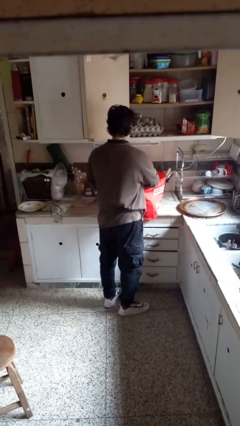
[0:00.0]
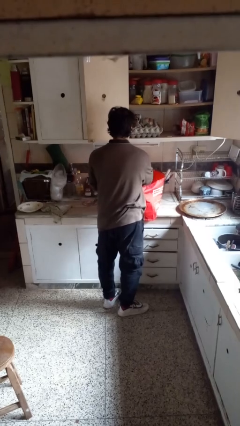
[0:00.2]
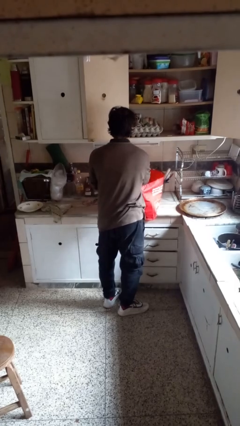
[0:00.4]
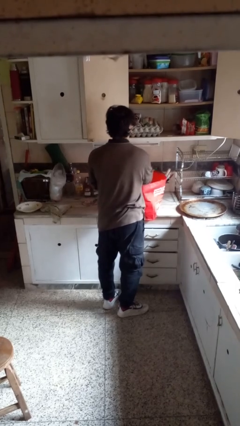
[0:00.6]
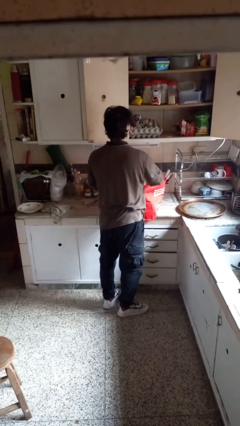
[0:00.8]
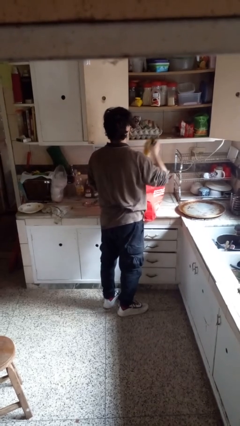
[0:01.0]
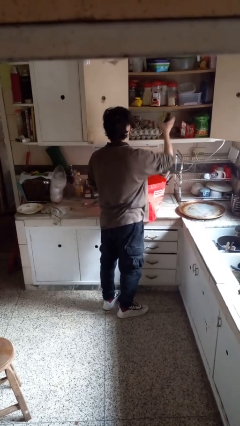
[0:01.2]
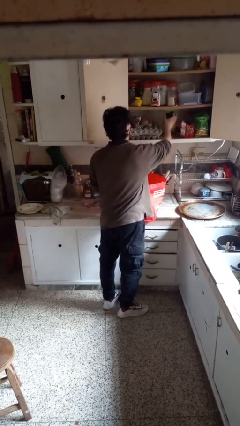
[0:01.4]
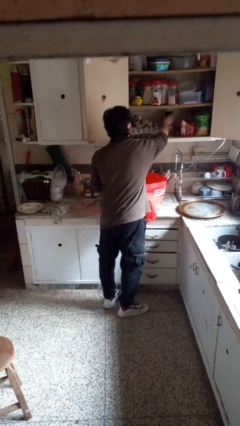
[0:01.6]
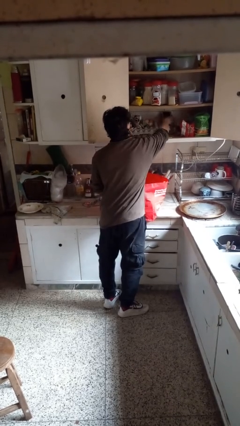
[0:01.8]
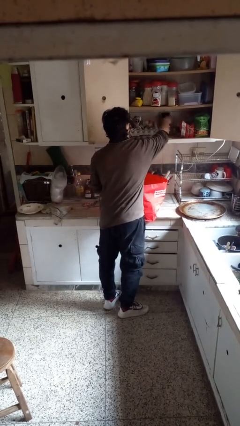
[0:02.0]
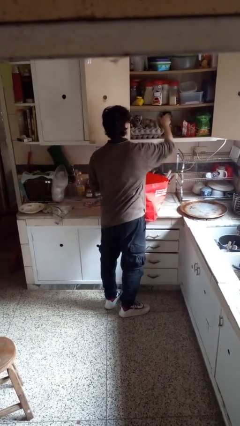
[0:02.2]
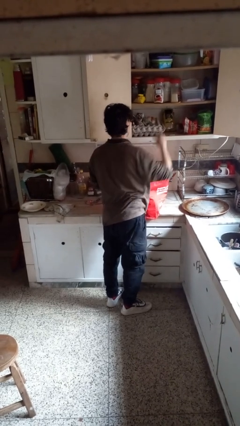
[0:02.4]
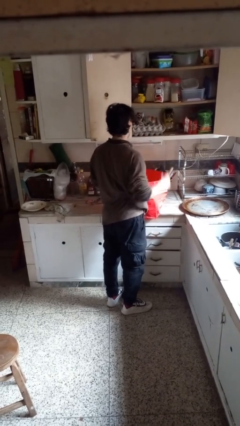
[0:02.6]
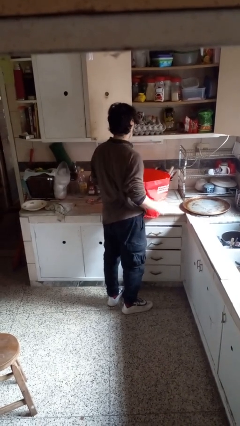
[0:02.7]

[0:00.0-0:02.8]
person loads groceries into cabinet

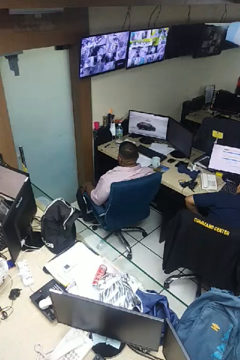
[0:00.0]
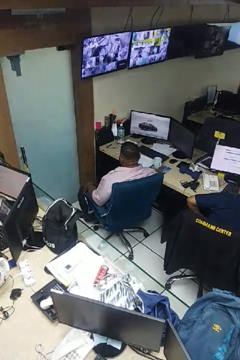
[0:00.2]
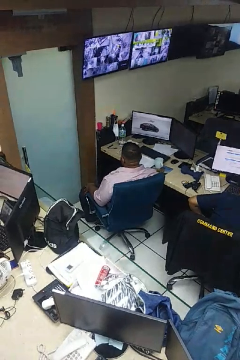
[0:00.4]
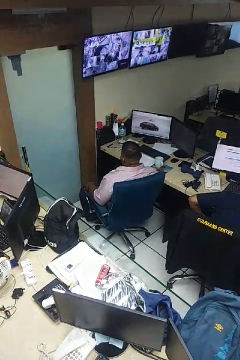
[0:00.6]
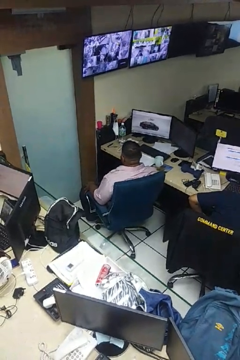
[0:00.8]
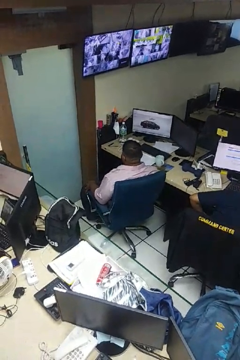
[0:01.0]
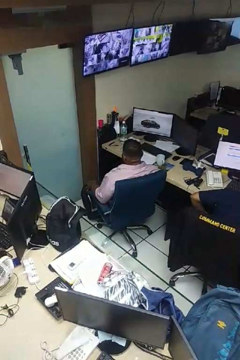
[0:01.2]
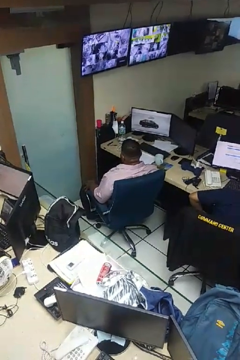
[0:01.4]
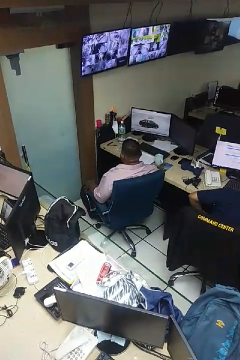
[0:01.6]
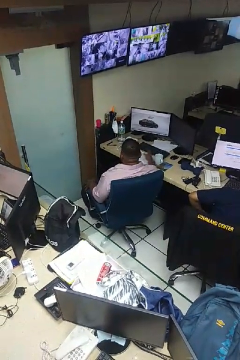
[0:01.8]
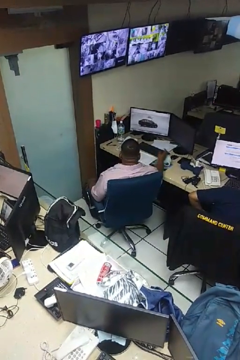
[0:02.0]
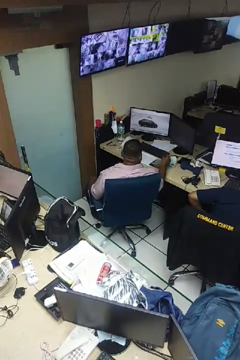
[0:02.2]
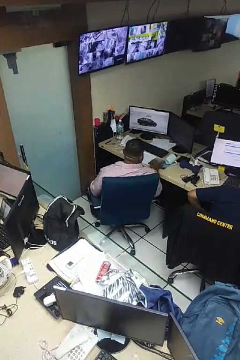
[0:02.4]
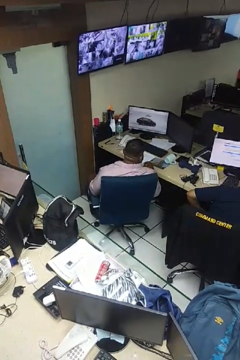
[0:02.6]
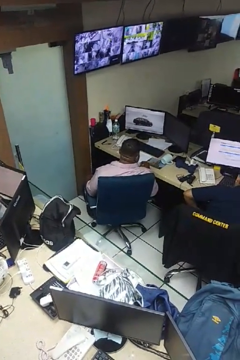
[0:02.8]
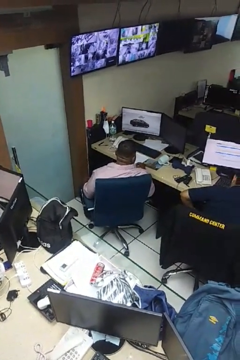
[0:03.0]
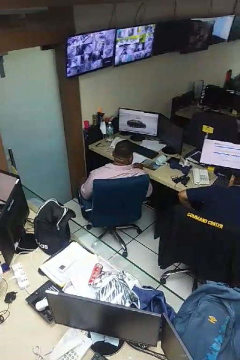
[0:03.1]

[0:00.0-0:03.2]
person knocks over glass

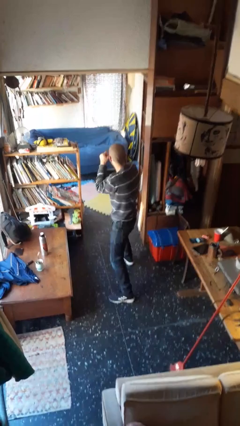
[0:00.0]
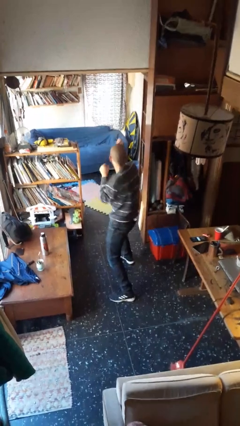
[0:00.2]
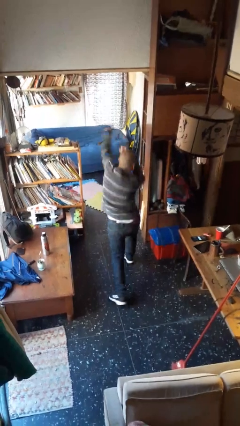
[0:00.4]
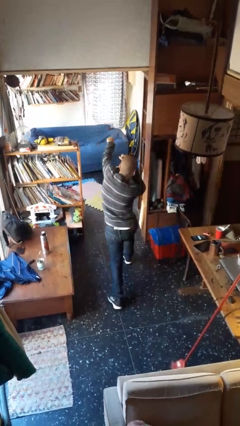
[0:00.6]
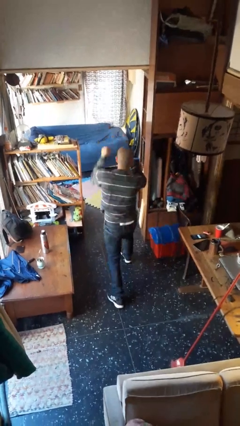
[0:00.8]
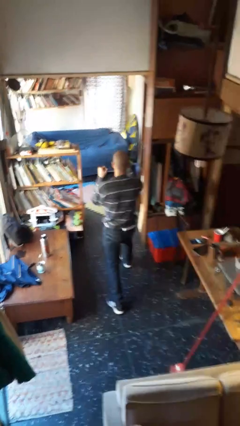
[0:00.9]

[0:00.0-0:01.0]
person punches

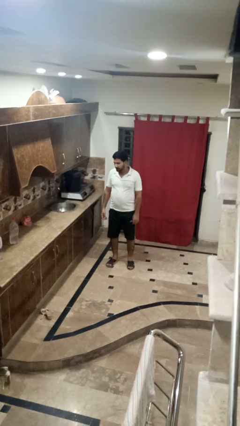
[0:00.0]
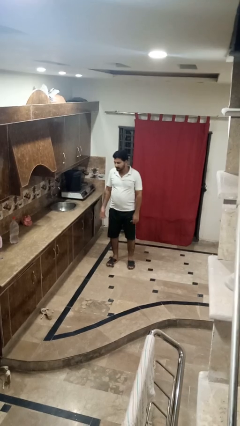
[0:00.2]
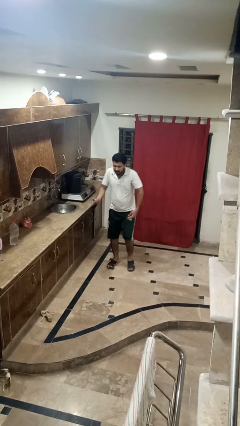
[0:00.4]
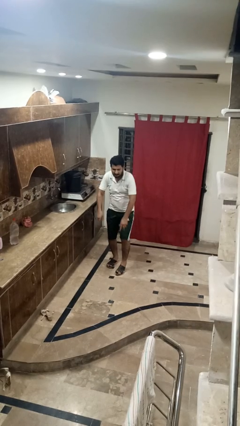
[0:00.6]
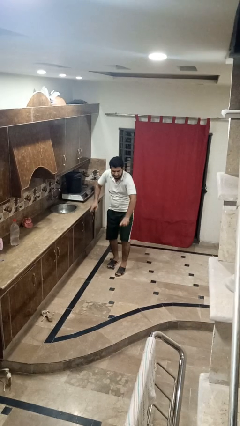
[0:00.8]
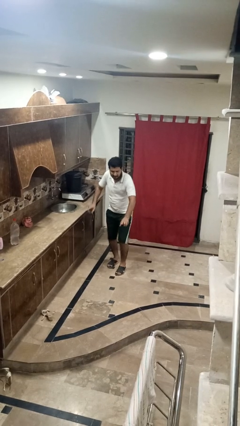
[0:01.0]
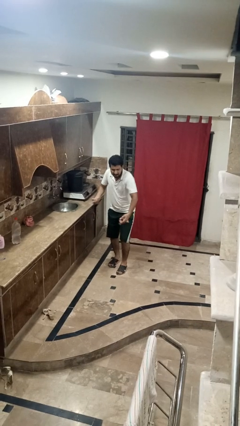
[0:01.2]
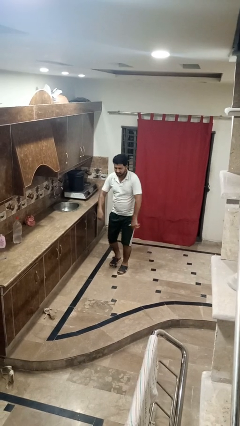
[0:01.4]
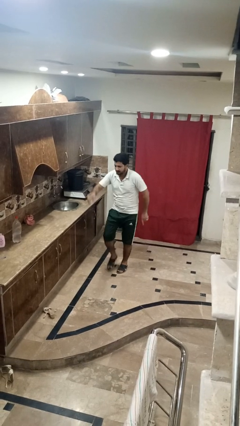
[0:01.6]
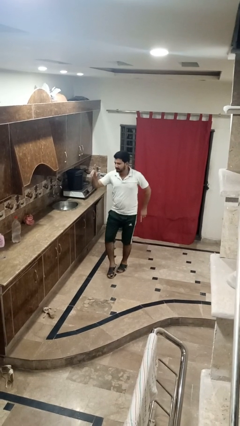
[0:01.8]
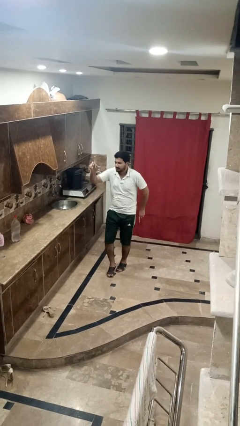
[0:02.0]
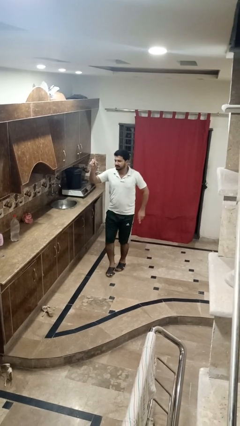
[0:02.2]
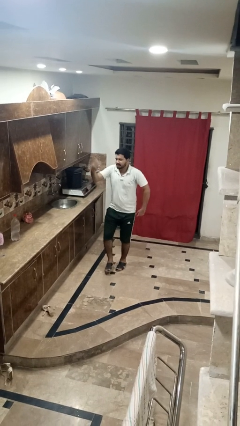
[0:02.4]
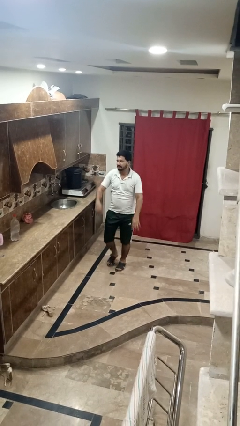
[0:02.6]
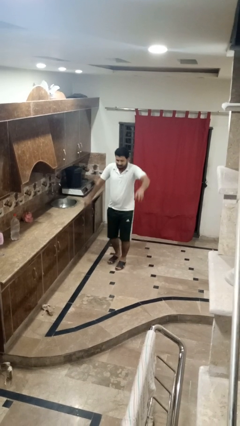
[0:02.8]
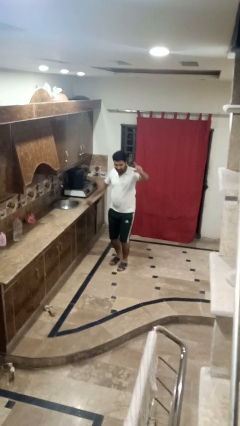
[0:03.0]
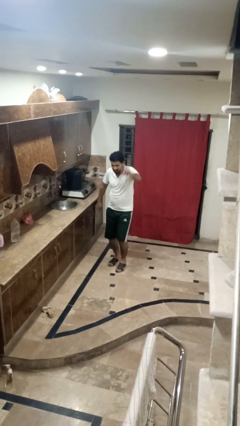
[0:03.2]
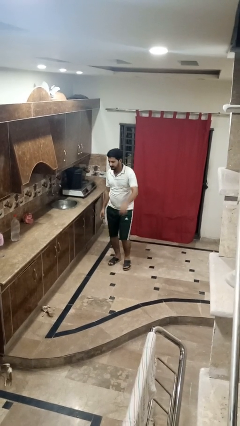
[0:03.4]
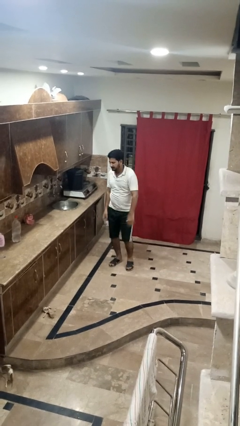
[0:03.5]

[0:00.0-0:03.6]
person dances in place

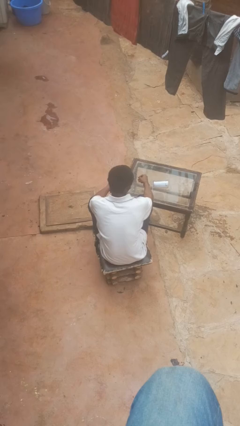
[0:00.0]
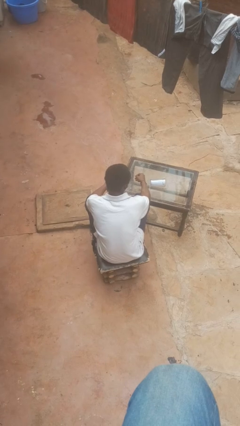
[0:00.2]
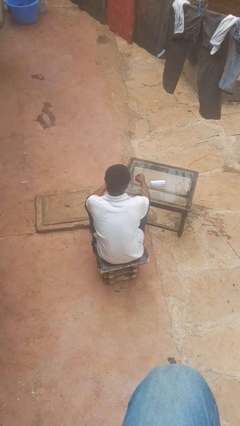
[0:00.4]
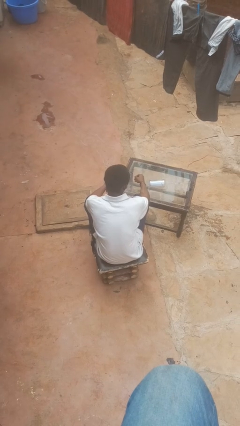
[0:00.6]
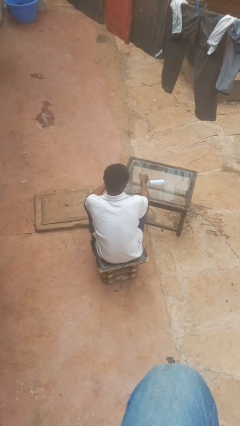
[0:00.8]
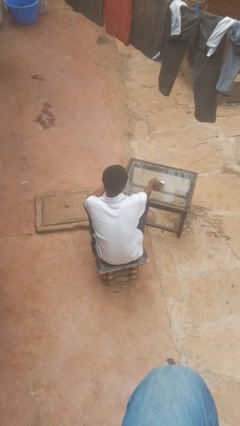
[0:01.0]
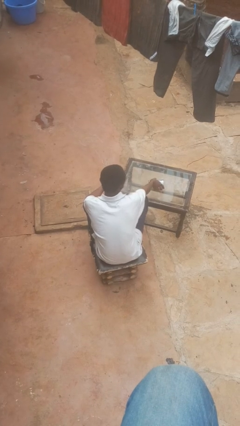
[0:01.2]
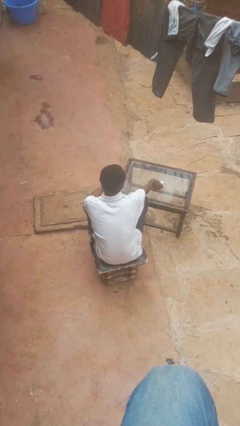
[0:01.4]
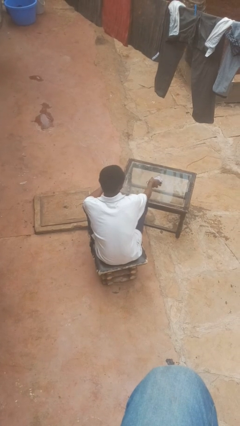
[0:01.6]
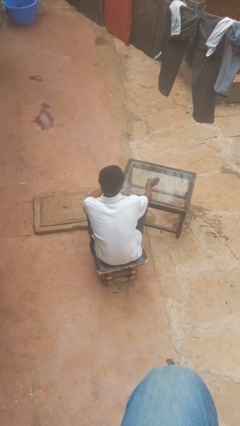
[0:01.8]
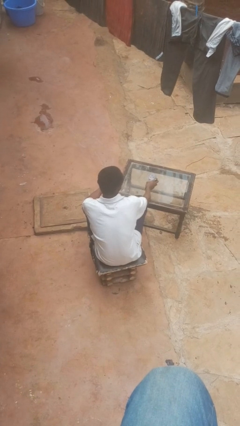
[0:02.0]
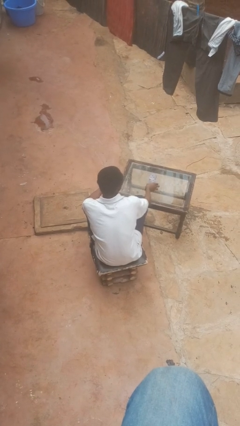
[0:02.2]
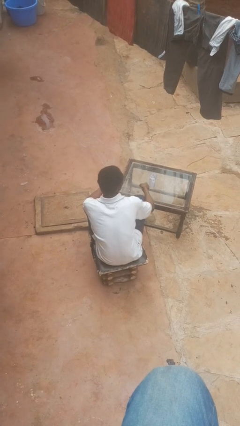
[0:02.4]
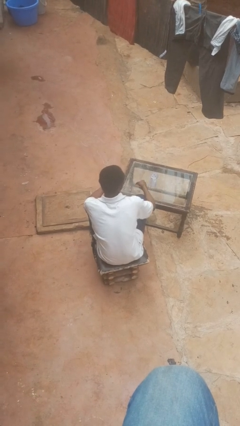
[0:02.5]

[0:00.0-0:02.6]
person sets upright glass

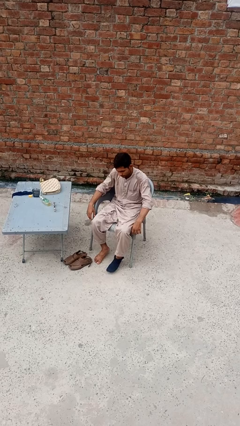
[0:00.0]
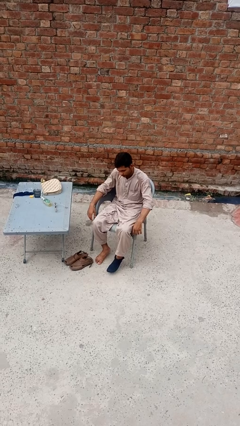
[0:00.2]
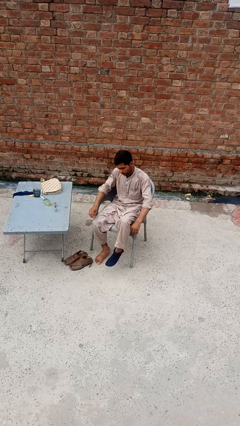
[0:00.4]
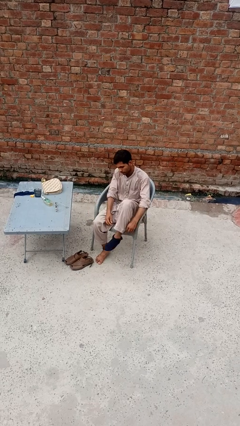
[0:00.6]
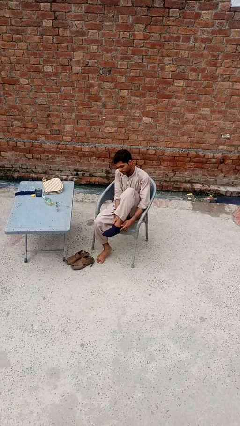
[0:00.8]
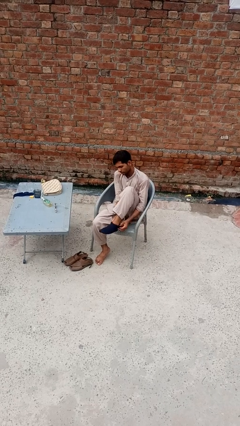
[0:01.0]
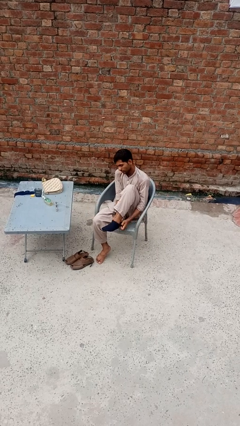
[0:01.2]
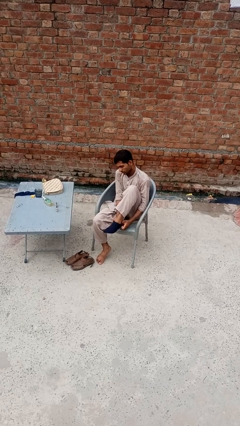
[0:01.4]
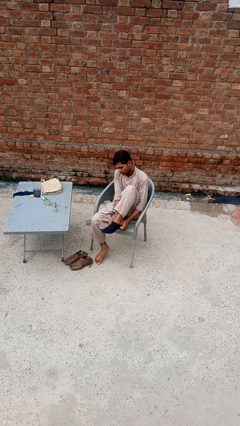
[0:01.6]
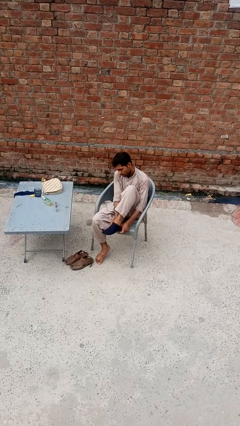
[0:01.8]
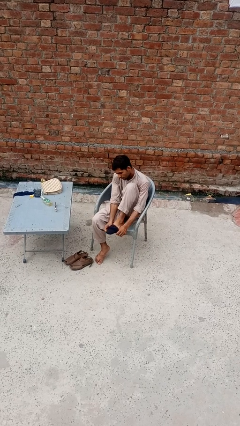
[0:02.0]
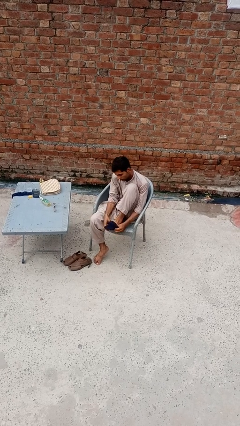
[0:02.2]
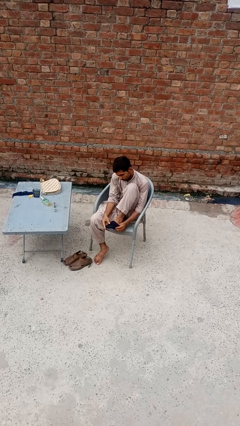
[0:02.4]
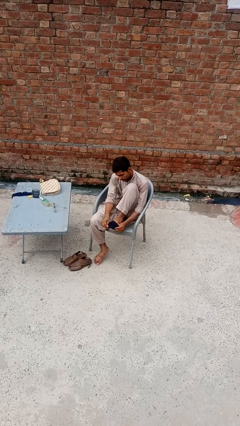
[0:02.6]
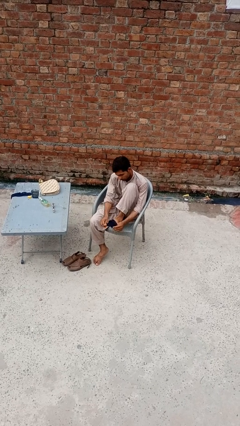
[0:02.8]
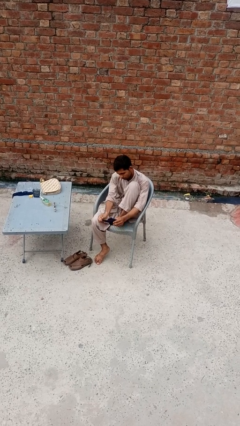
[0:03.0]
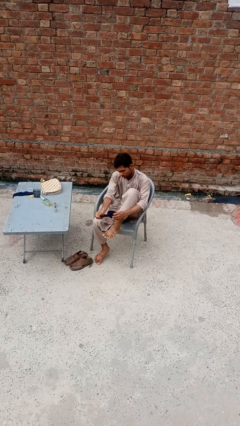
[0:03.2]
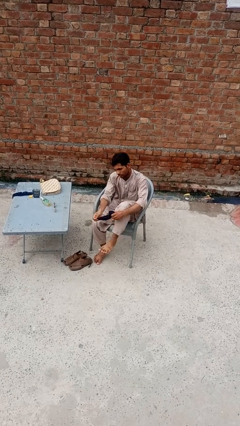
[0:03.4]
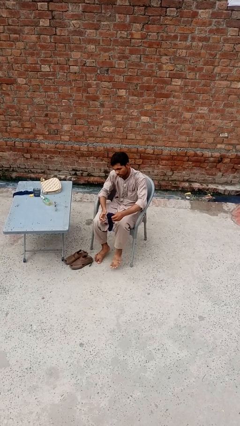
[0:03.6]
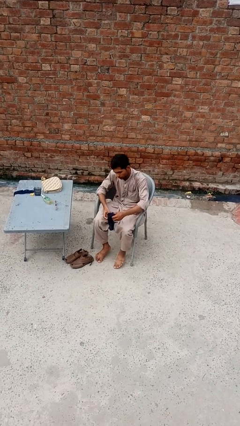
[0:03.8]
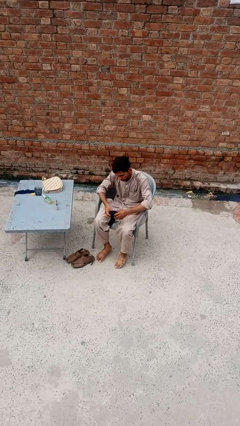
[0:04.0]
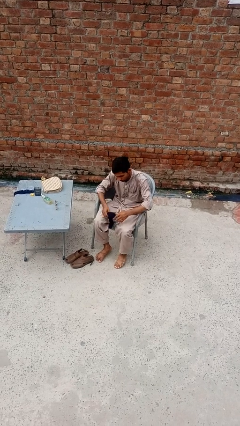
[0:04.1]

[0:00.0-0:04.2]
person takes off socks

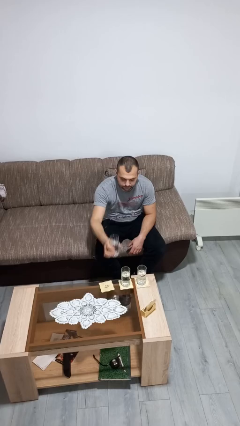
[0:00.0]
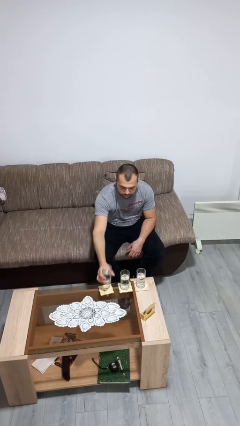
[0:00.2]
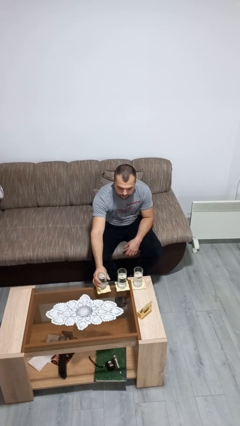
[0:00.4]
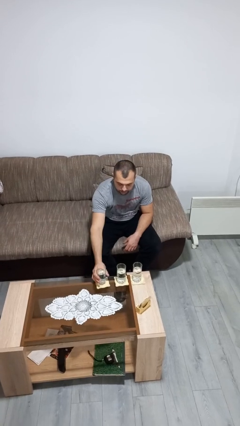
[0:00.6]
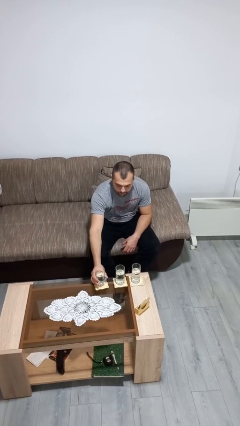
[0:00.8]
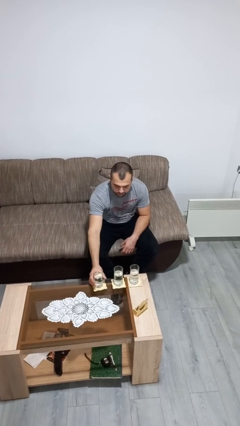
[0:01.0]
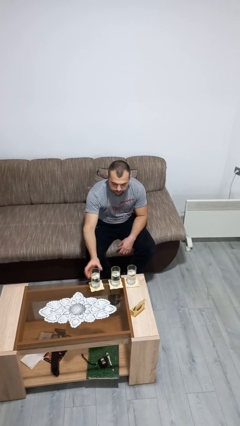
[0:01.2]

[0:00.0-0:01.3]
person puts down object on table
